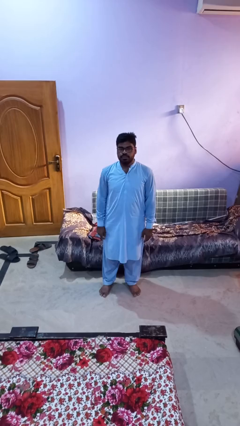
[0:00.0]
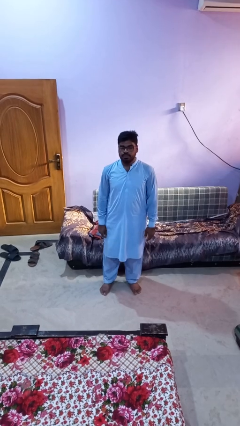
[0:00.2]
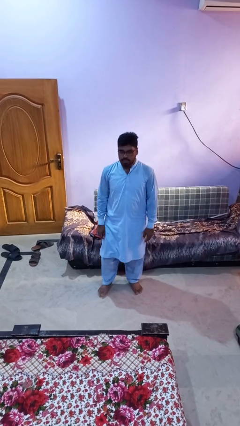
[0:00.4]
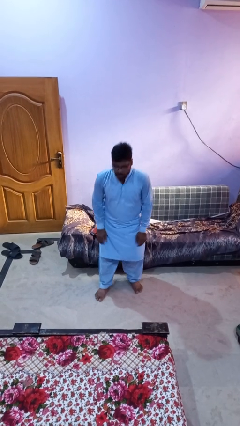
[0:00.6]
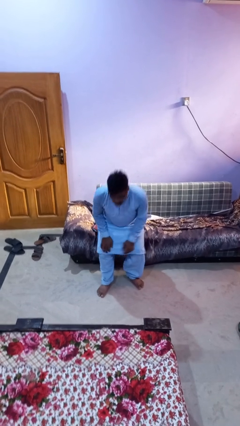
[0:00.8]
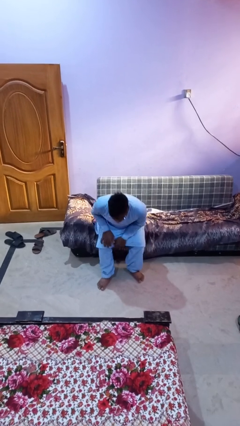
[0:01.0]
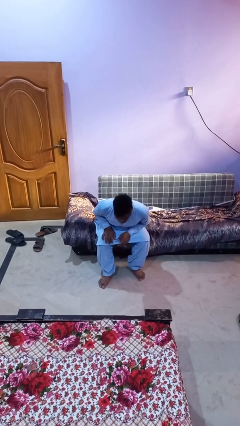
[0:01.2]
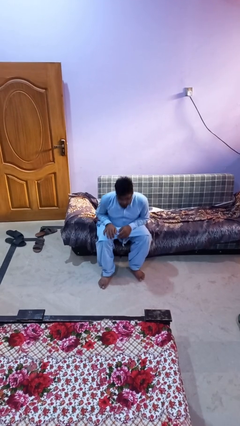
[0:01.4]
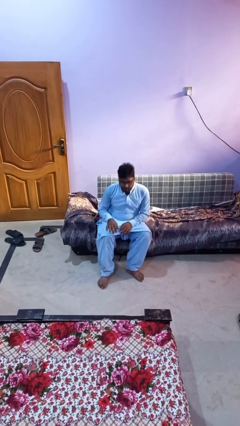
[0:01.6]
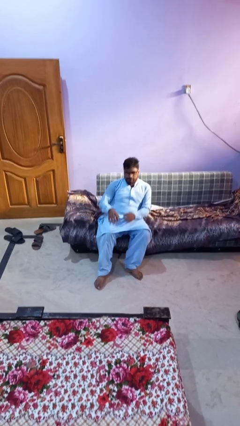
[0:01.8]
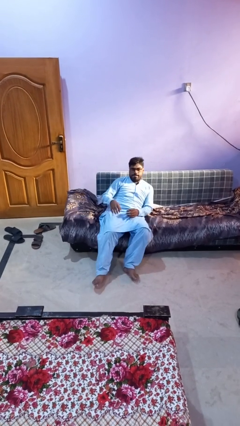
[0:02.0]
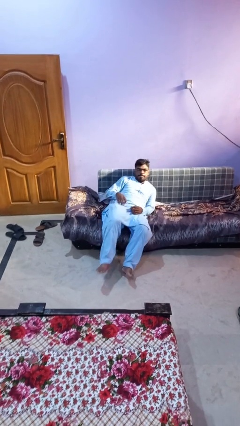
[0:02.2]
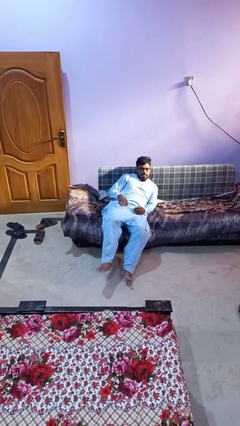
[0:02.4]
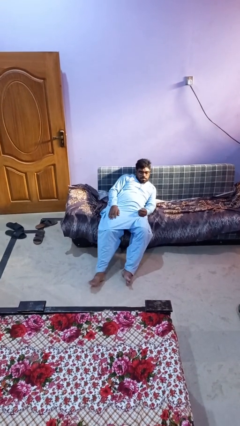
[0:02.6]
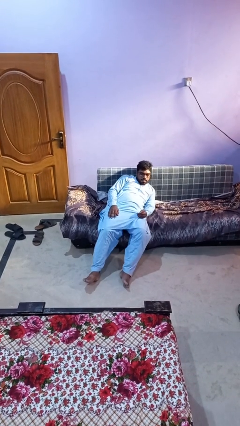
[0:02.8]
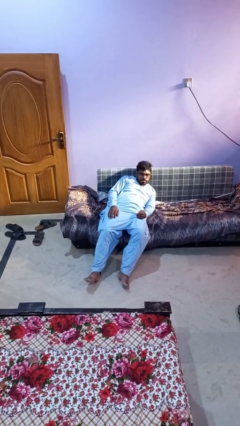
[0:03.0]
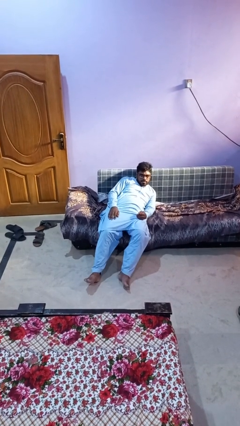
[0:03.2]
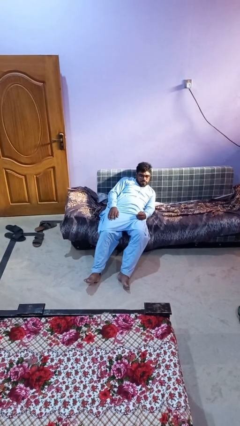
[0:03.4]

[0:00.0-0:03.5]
person lies down on couch

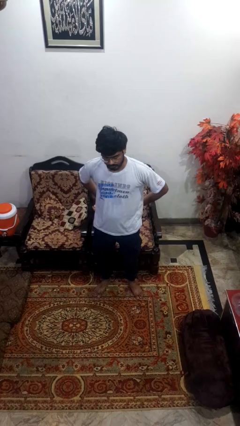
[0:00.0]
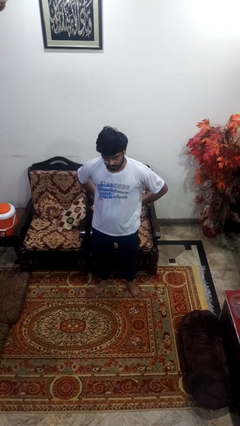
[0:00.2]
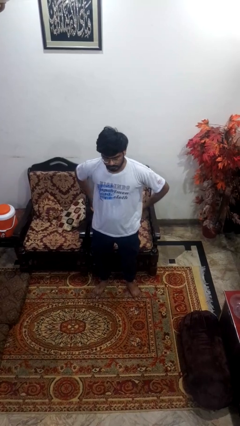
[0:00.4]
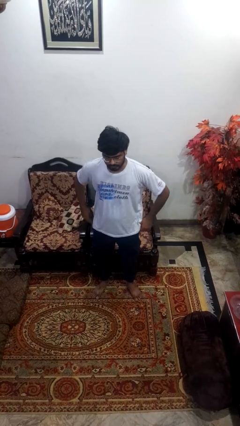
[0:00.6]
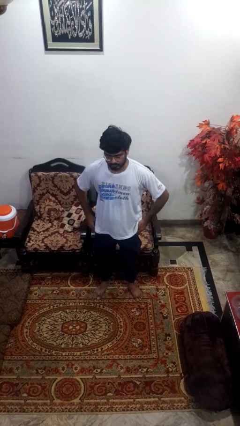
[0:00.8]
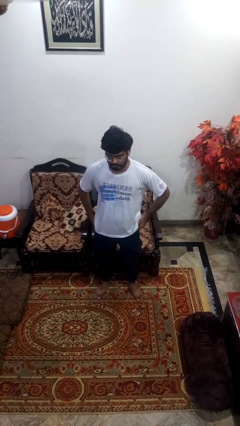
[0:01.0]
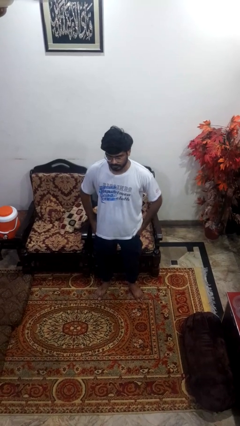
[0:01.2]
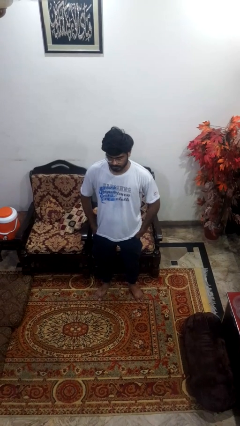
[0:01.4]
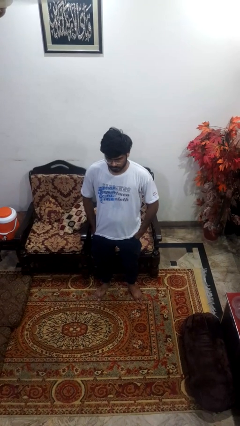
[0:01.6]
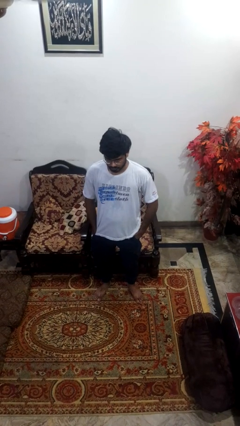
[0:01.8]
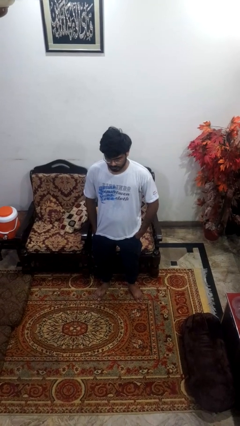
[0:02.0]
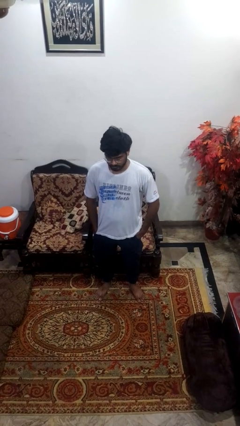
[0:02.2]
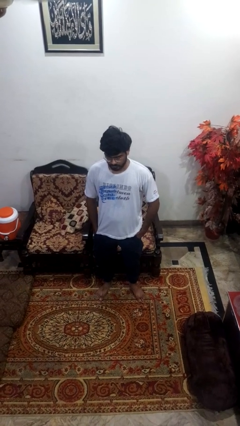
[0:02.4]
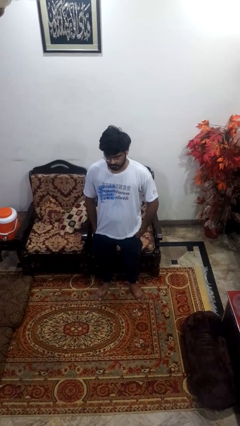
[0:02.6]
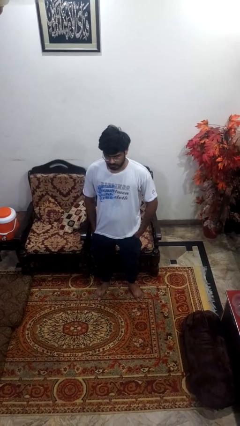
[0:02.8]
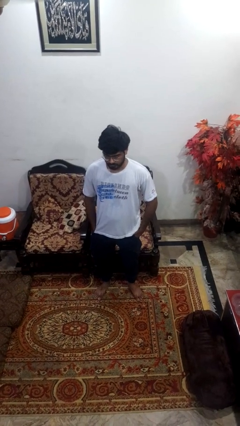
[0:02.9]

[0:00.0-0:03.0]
person puts hands in back pockets

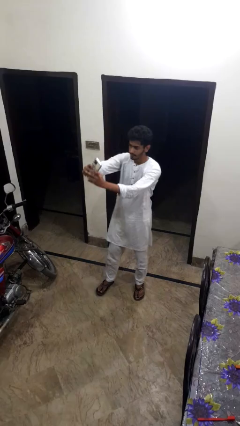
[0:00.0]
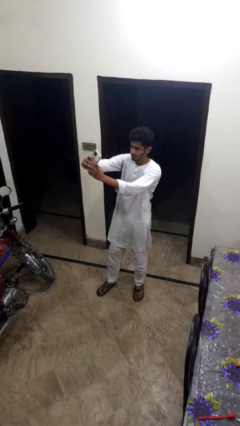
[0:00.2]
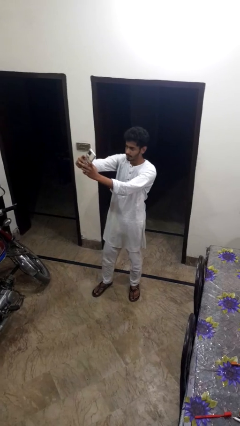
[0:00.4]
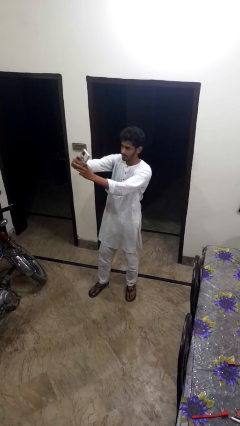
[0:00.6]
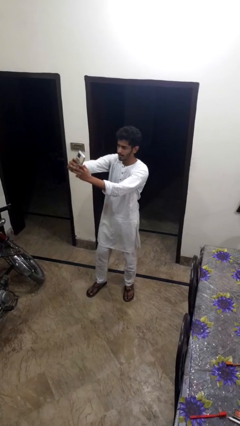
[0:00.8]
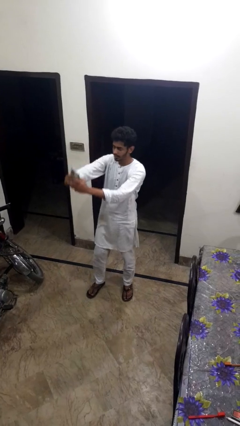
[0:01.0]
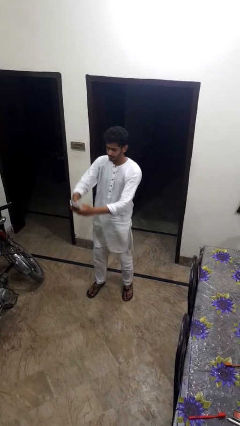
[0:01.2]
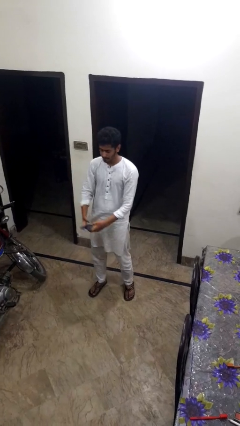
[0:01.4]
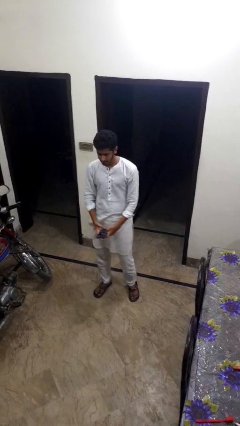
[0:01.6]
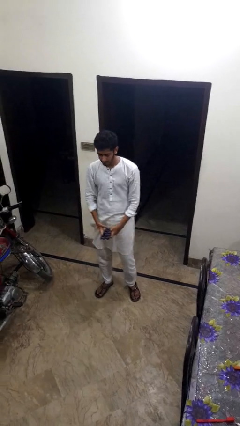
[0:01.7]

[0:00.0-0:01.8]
person takes selfie

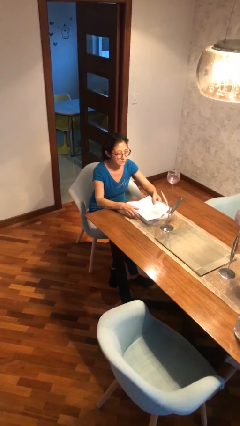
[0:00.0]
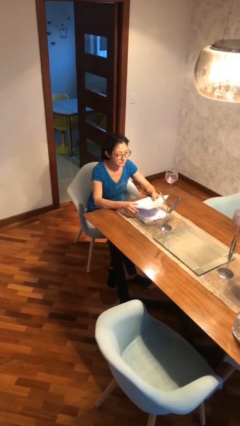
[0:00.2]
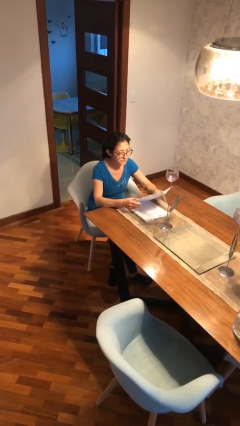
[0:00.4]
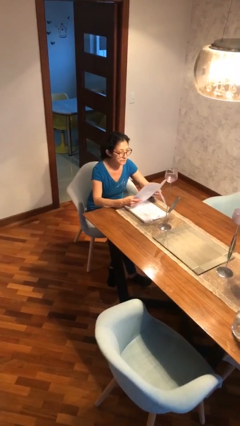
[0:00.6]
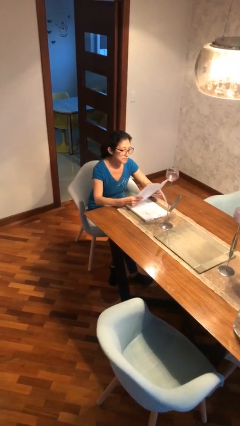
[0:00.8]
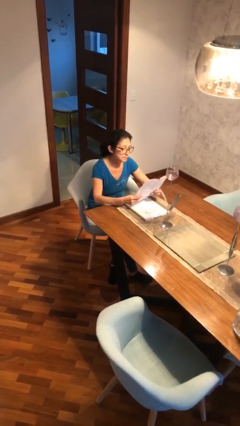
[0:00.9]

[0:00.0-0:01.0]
person picks up object from table

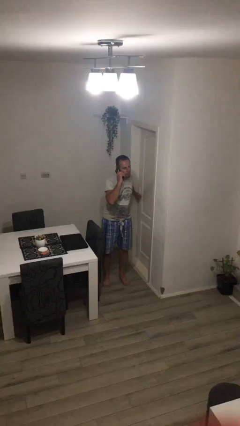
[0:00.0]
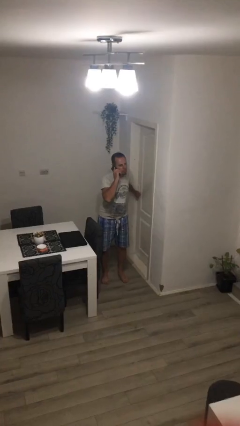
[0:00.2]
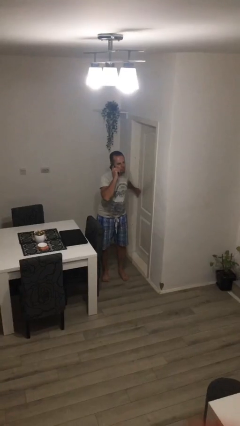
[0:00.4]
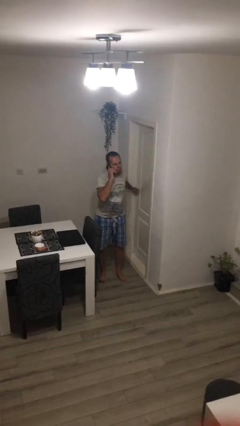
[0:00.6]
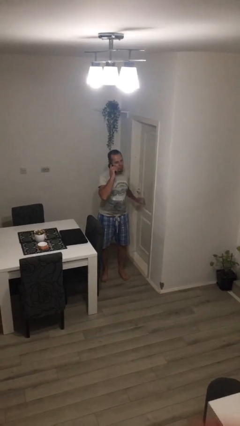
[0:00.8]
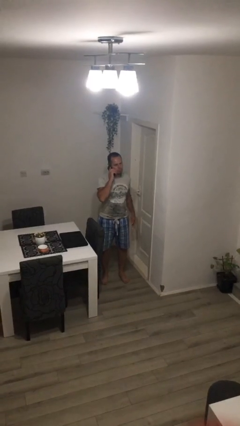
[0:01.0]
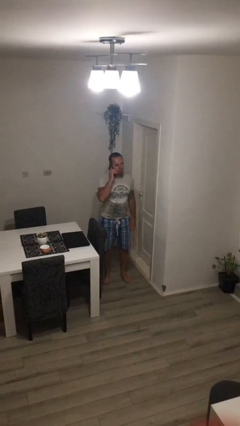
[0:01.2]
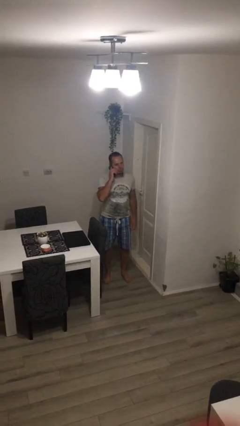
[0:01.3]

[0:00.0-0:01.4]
person closes facility door

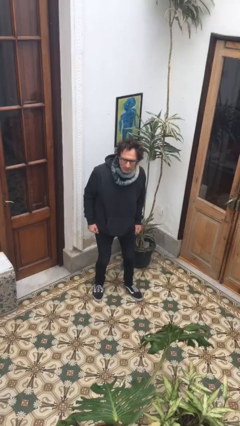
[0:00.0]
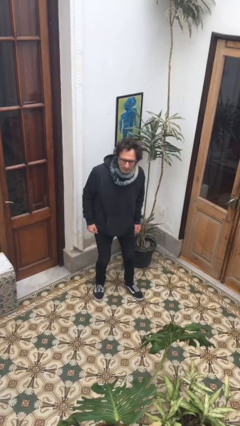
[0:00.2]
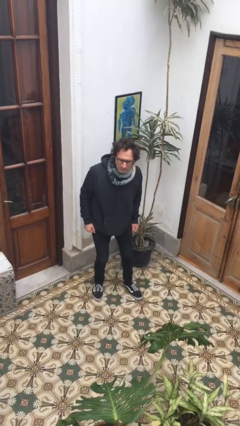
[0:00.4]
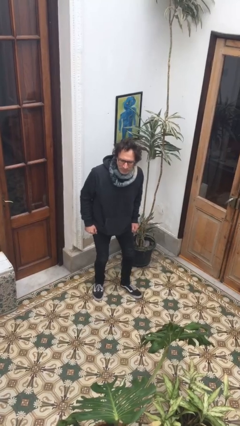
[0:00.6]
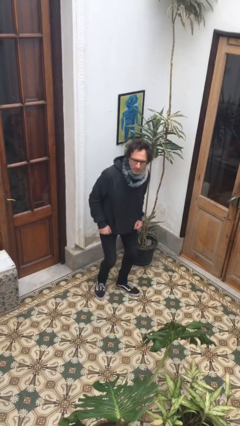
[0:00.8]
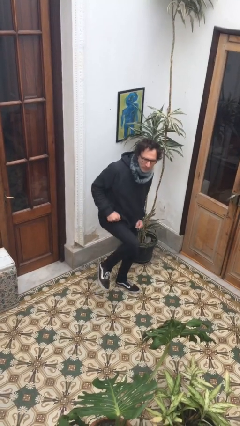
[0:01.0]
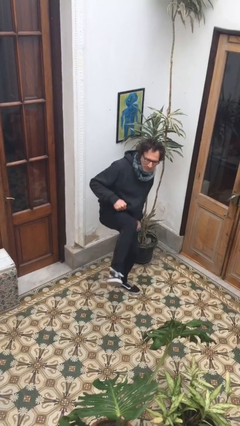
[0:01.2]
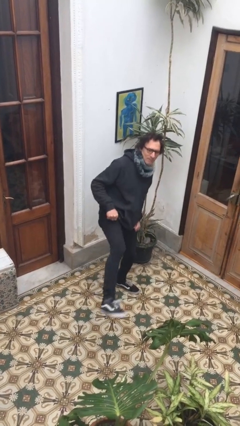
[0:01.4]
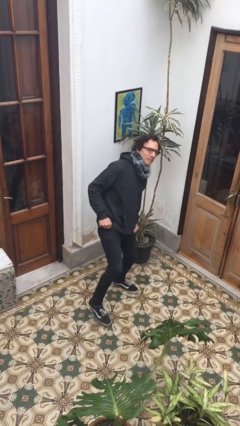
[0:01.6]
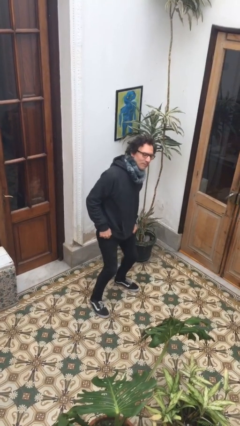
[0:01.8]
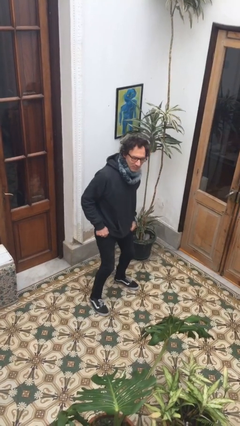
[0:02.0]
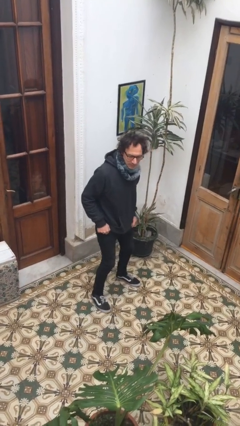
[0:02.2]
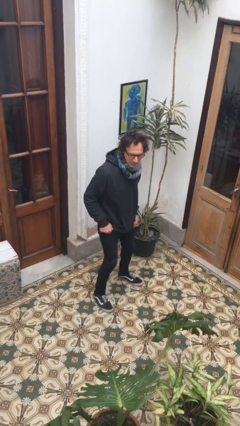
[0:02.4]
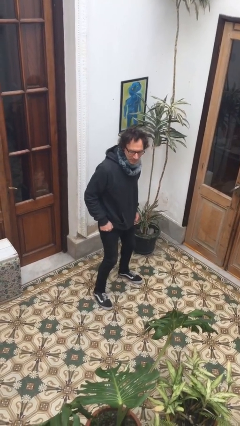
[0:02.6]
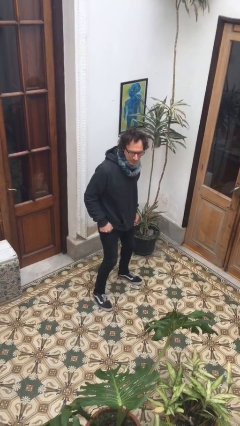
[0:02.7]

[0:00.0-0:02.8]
person karate kicks

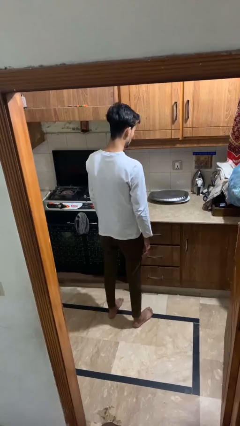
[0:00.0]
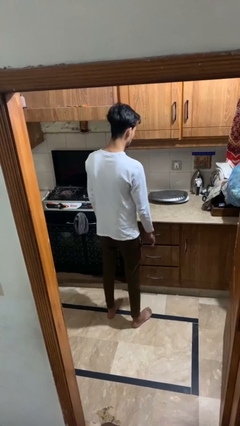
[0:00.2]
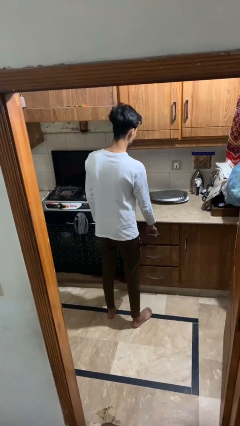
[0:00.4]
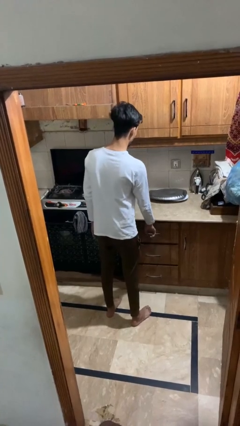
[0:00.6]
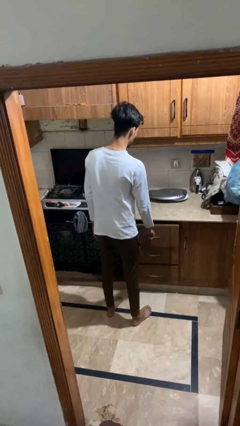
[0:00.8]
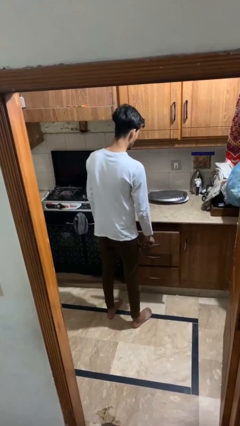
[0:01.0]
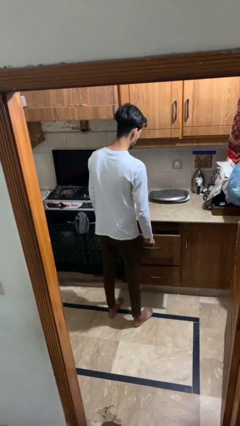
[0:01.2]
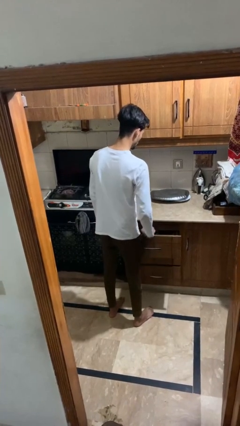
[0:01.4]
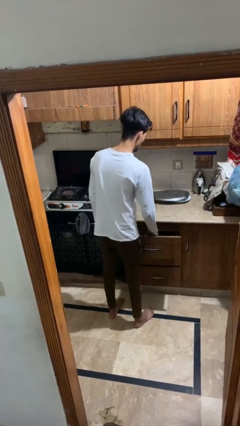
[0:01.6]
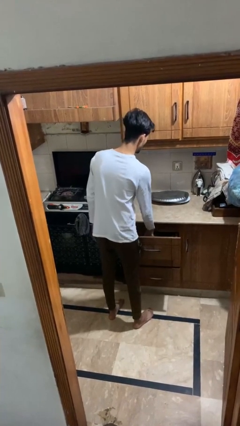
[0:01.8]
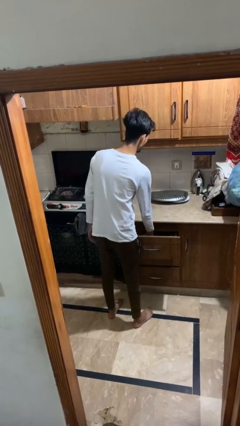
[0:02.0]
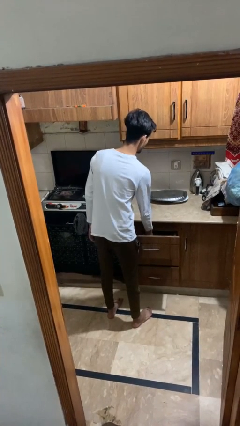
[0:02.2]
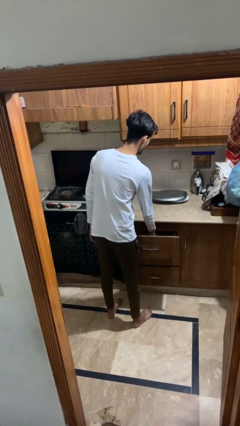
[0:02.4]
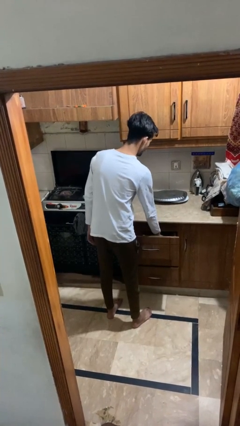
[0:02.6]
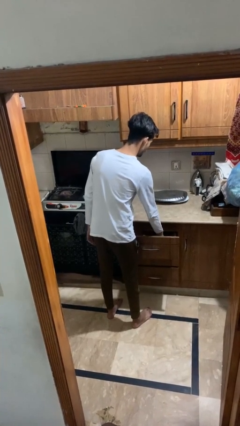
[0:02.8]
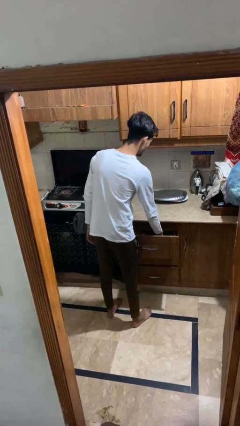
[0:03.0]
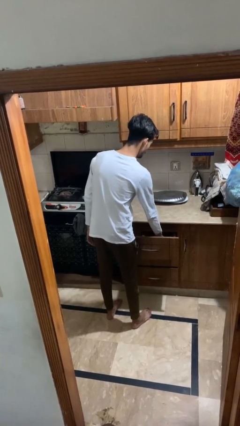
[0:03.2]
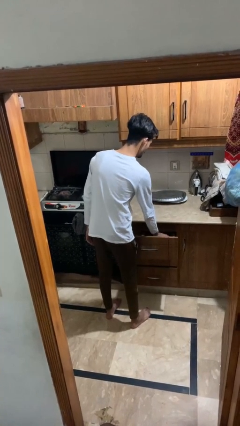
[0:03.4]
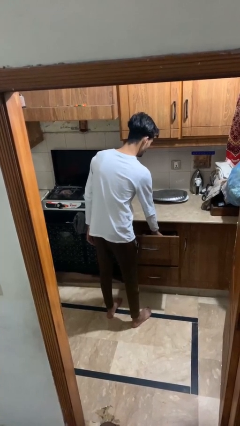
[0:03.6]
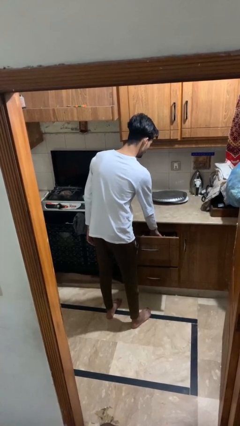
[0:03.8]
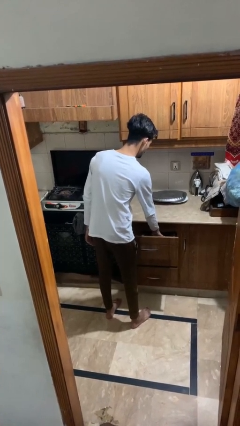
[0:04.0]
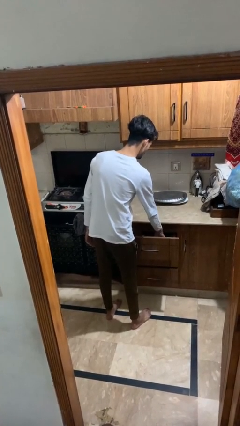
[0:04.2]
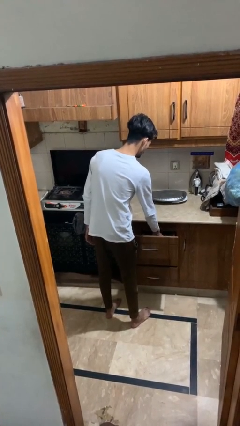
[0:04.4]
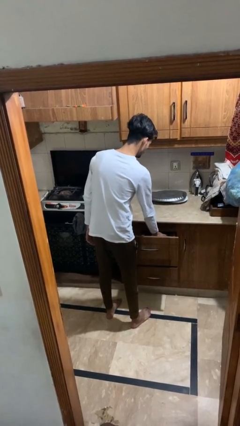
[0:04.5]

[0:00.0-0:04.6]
person searches in kitchen drawer
